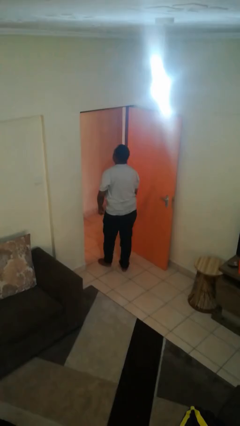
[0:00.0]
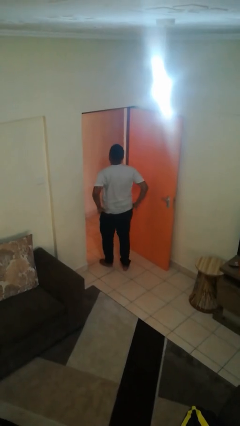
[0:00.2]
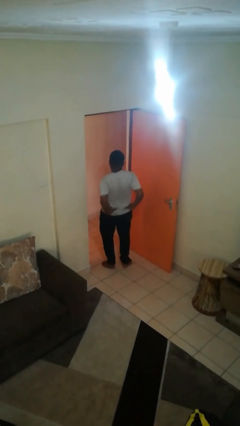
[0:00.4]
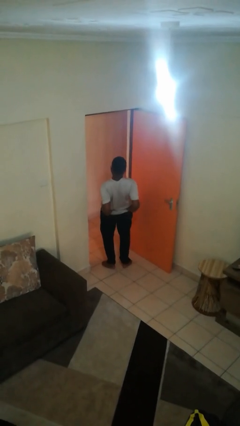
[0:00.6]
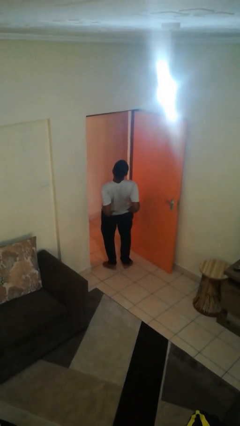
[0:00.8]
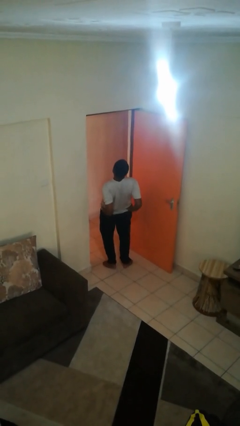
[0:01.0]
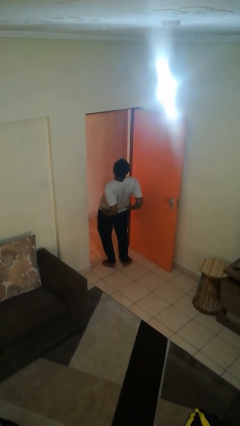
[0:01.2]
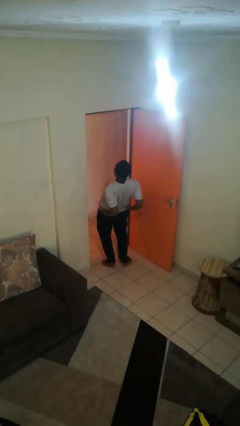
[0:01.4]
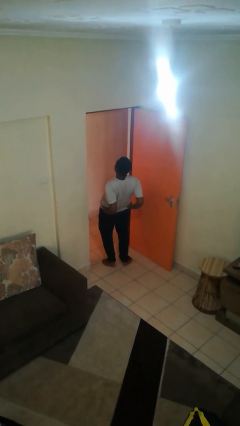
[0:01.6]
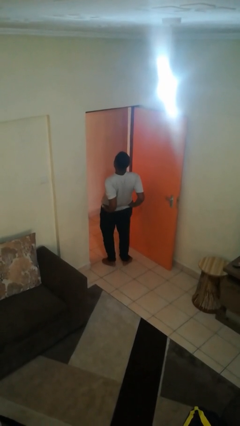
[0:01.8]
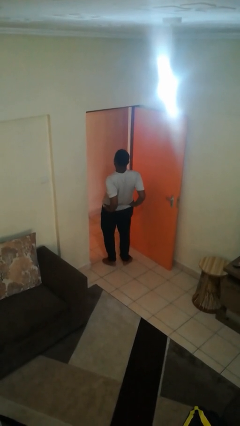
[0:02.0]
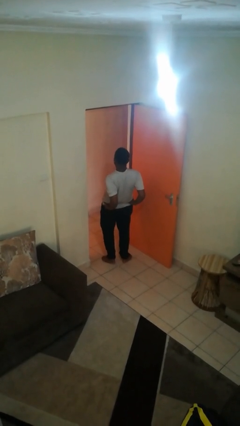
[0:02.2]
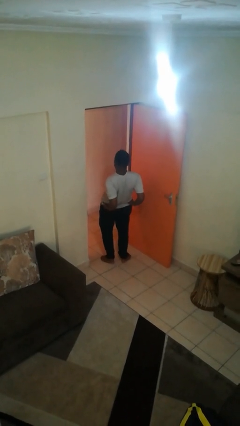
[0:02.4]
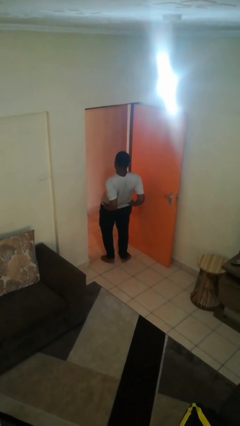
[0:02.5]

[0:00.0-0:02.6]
person stretches back

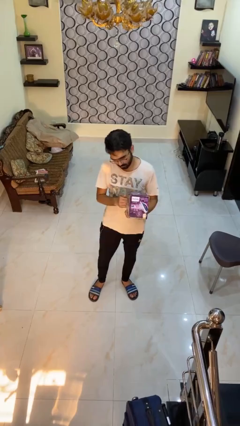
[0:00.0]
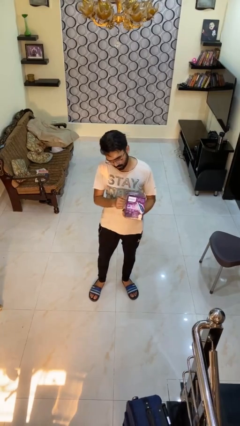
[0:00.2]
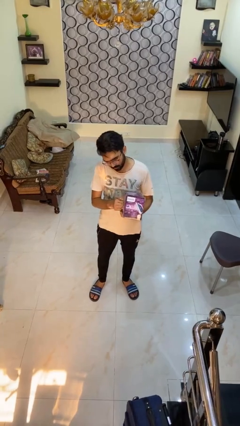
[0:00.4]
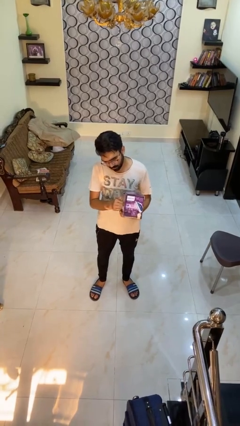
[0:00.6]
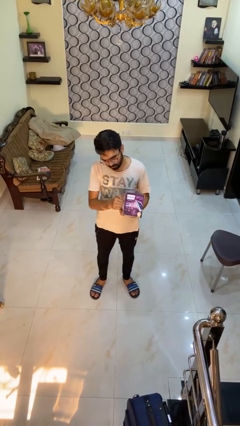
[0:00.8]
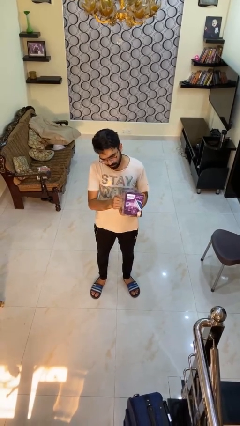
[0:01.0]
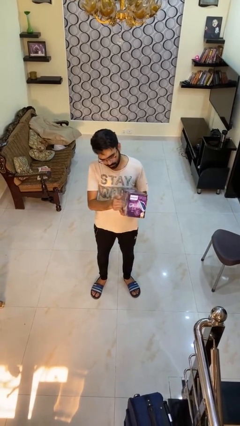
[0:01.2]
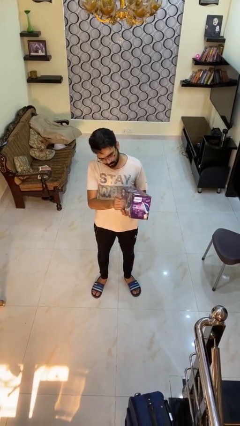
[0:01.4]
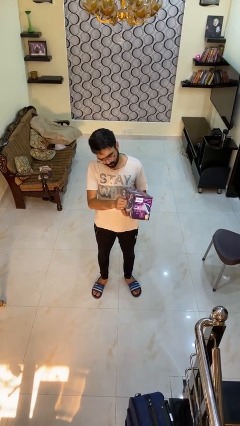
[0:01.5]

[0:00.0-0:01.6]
person taps object with finger

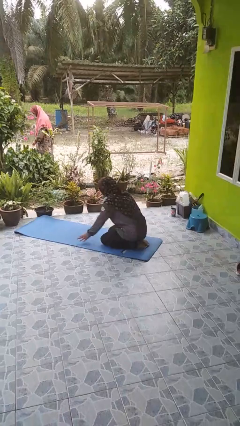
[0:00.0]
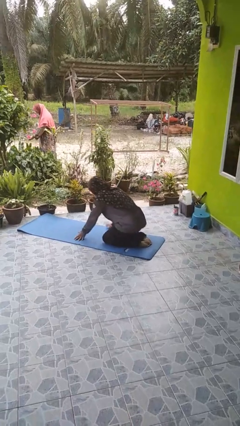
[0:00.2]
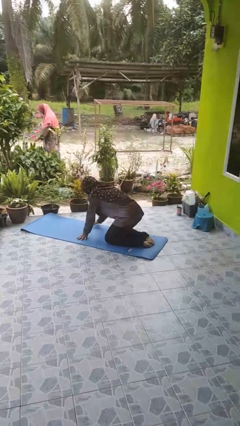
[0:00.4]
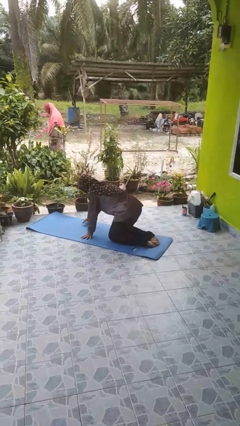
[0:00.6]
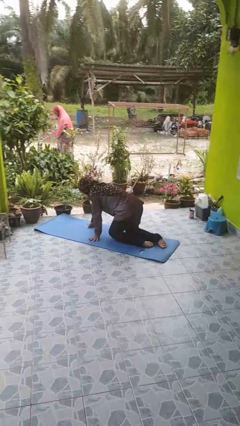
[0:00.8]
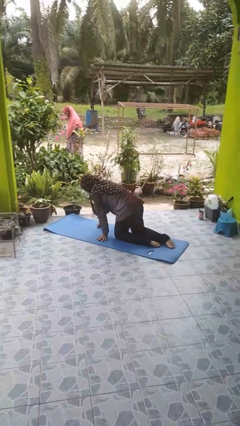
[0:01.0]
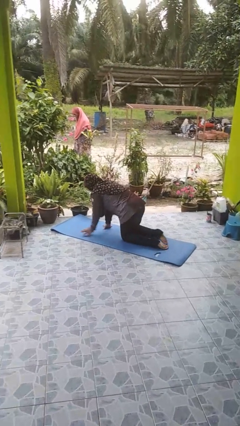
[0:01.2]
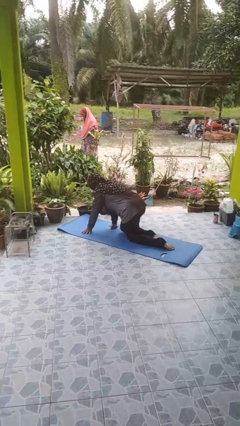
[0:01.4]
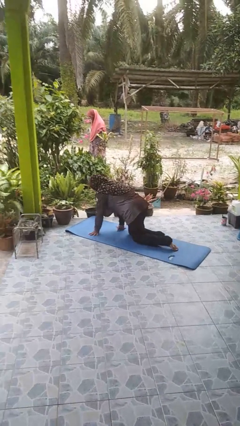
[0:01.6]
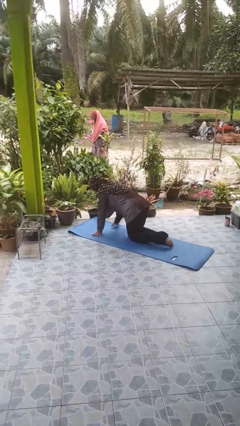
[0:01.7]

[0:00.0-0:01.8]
person crawls

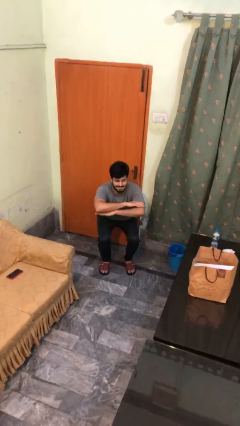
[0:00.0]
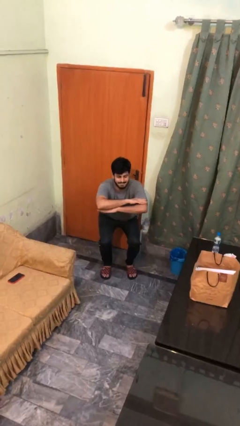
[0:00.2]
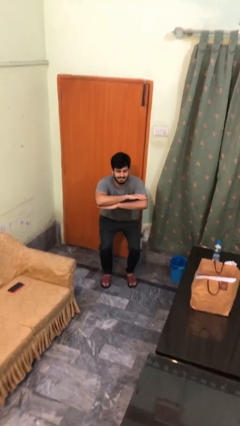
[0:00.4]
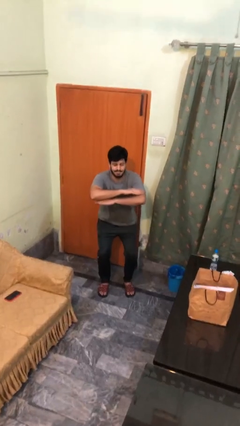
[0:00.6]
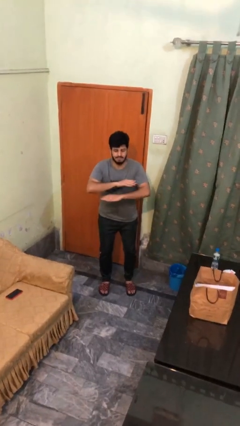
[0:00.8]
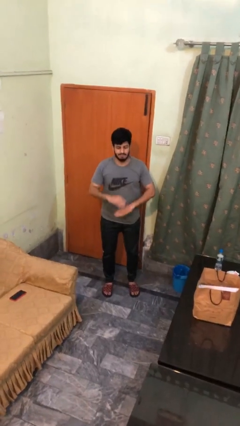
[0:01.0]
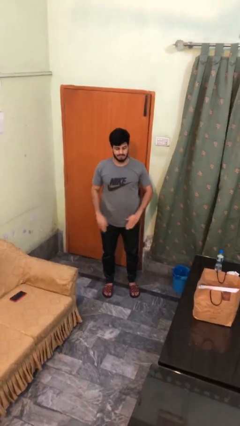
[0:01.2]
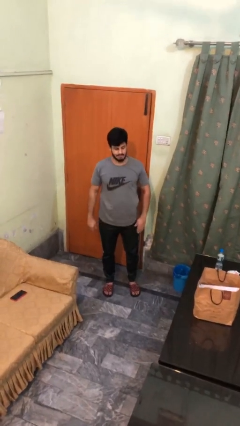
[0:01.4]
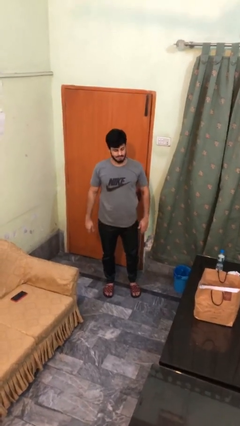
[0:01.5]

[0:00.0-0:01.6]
person stands up

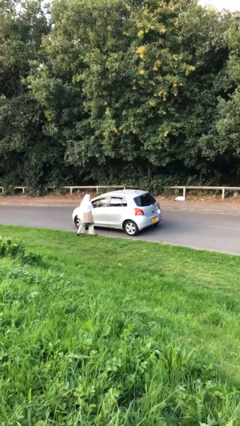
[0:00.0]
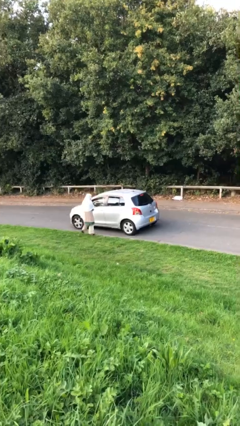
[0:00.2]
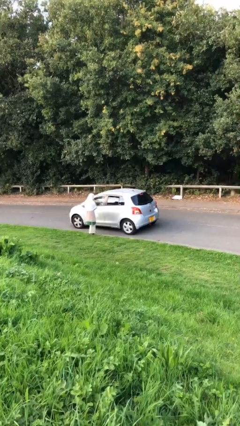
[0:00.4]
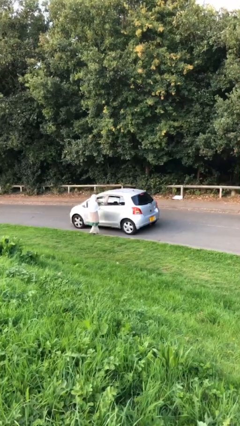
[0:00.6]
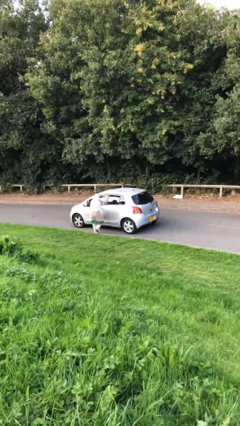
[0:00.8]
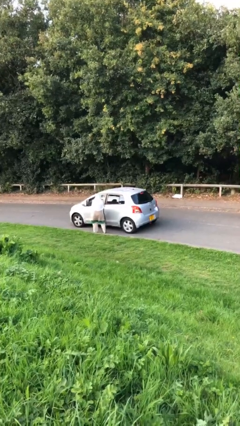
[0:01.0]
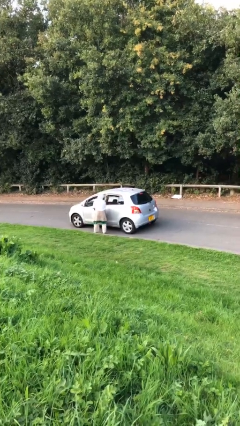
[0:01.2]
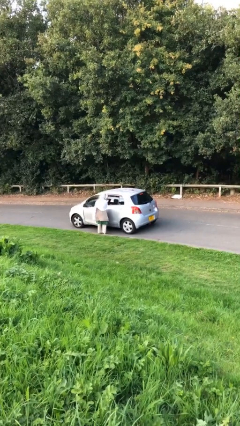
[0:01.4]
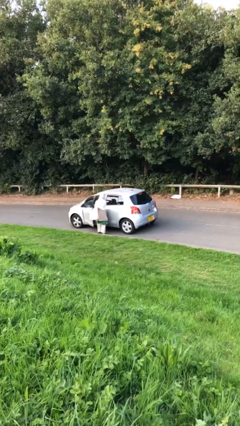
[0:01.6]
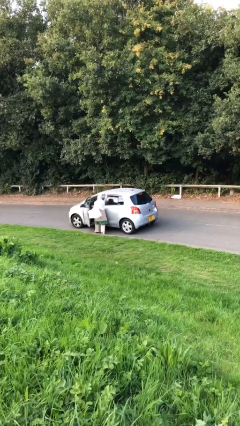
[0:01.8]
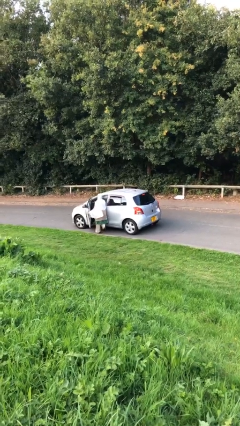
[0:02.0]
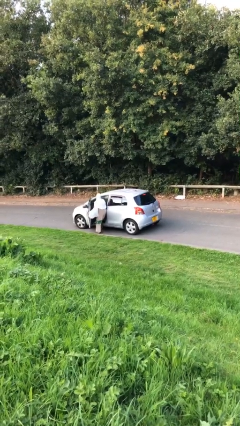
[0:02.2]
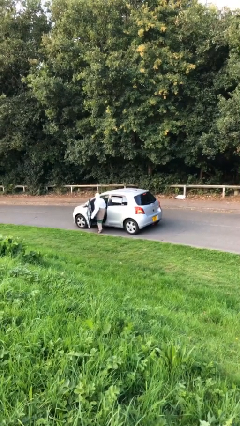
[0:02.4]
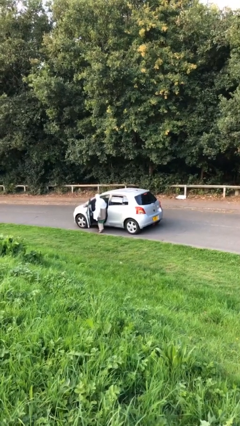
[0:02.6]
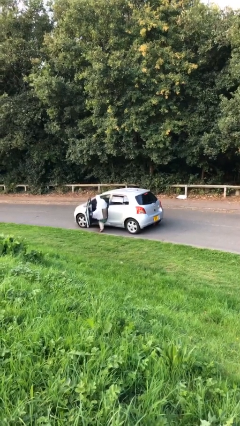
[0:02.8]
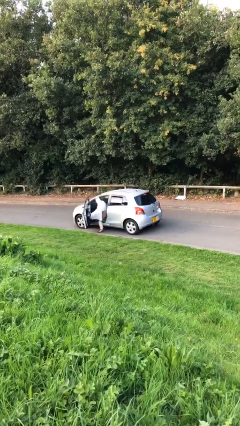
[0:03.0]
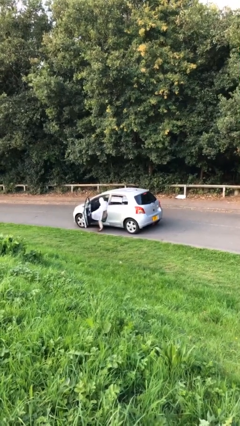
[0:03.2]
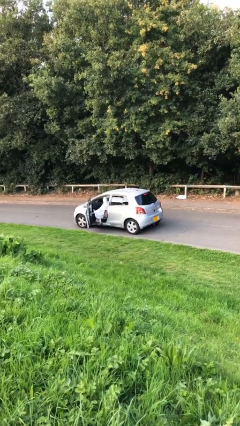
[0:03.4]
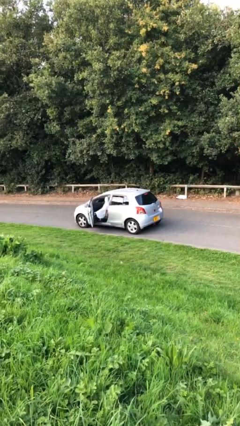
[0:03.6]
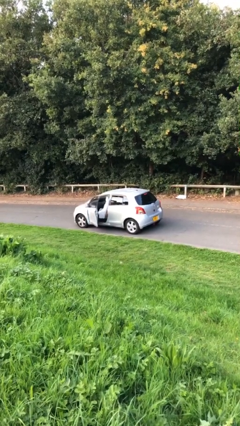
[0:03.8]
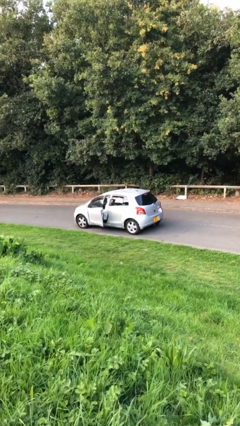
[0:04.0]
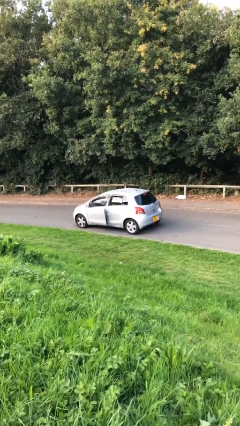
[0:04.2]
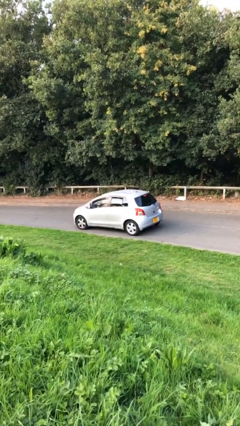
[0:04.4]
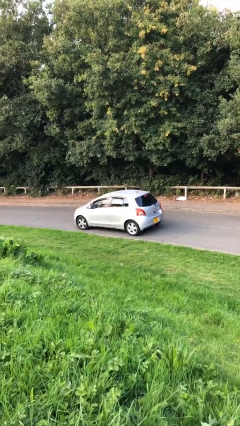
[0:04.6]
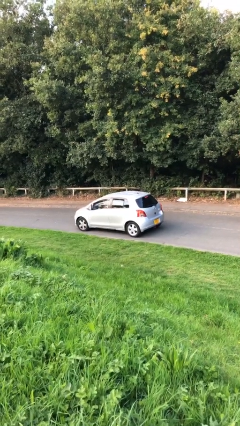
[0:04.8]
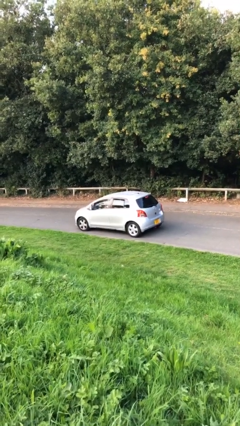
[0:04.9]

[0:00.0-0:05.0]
car picks up person

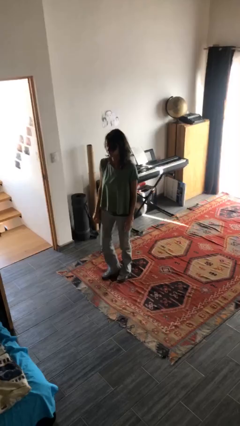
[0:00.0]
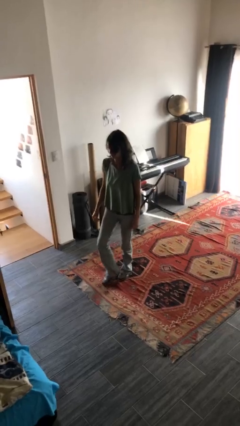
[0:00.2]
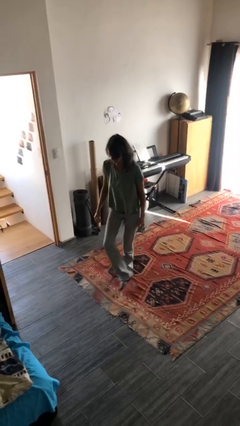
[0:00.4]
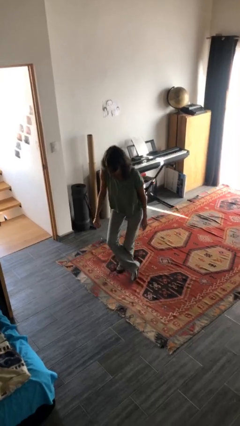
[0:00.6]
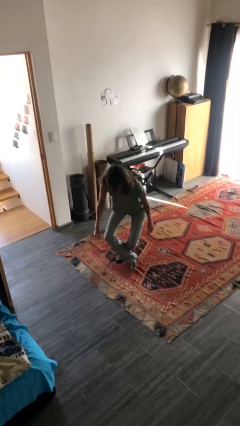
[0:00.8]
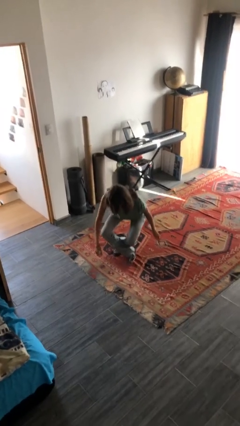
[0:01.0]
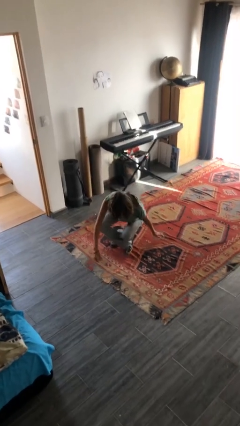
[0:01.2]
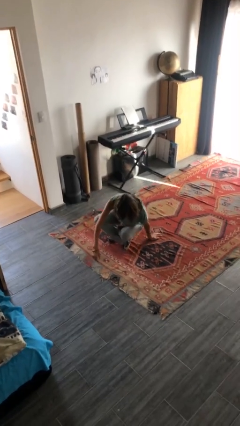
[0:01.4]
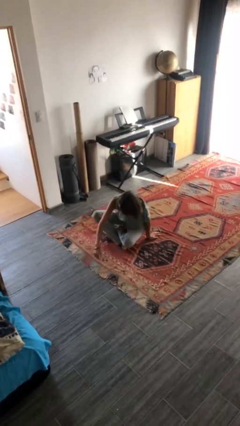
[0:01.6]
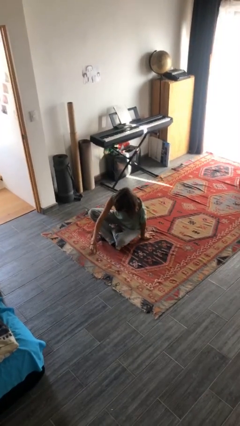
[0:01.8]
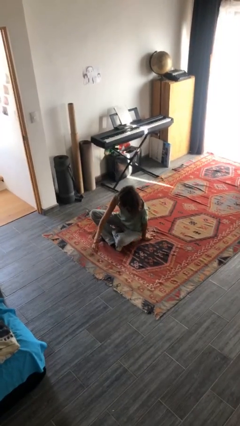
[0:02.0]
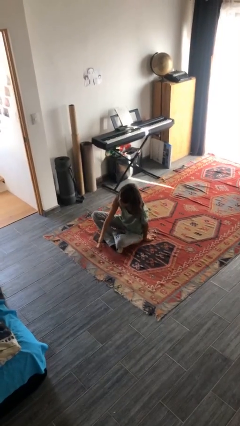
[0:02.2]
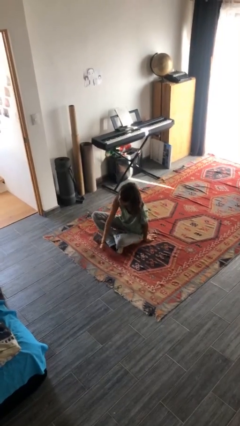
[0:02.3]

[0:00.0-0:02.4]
person sits crisscross

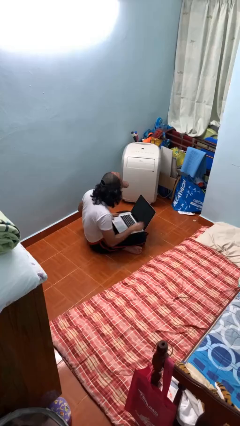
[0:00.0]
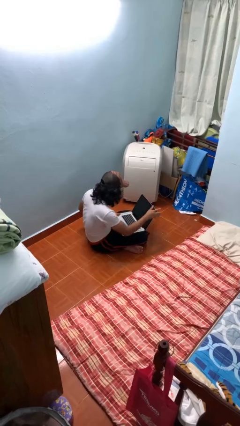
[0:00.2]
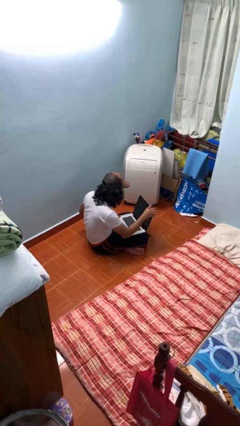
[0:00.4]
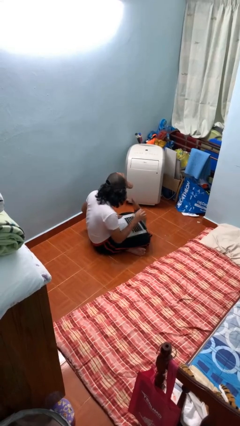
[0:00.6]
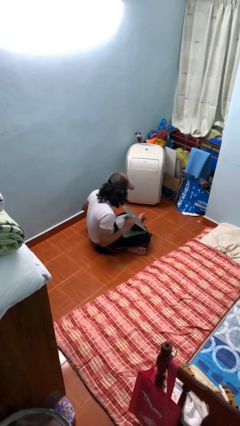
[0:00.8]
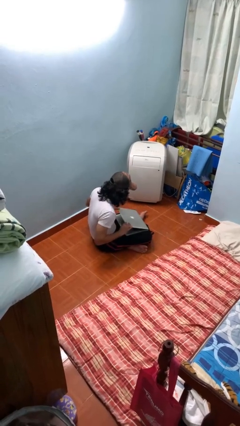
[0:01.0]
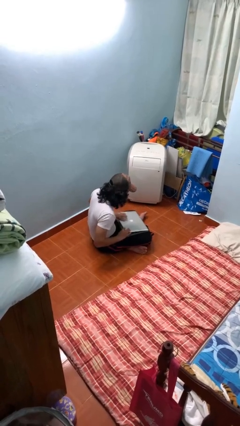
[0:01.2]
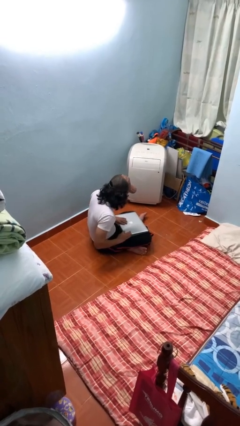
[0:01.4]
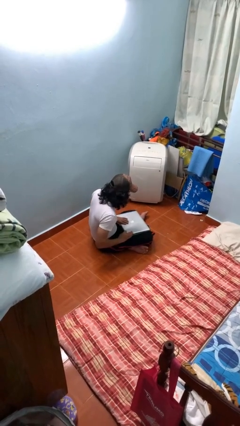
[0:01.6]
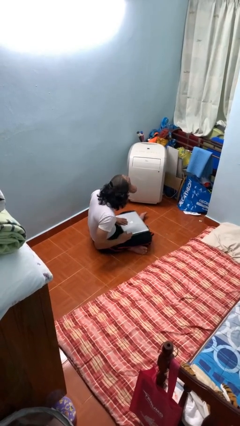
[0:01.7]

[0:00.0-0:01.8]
person closes laptop

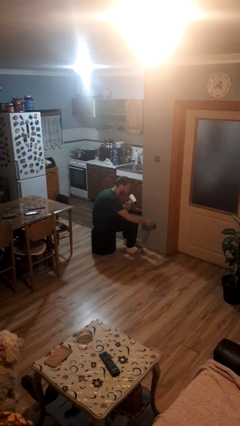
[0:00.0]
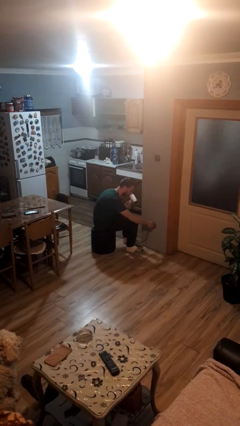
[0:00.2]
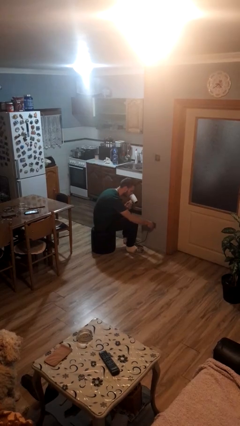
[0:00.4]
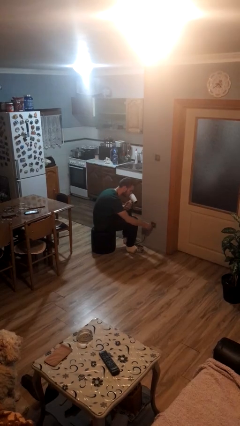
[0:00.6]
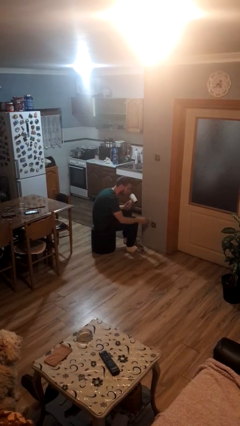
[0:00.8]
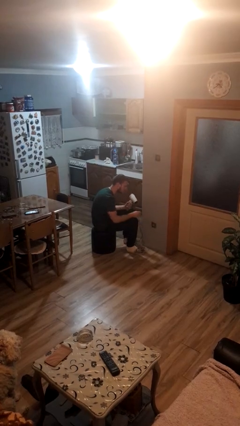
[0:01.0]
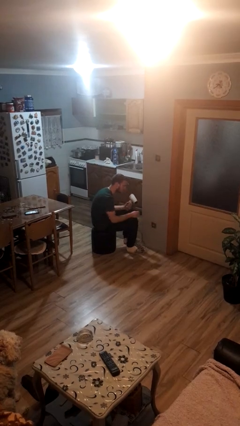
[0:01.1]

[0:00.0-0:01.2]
person unplugs from electrical socket